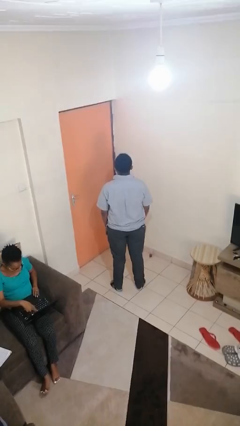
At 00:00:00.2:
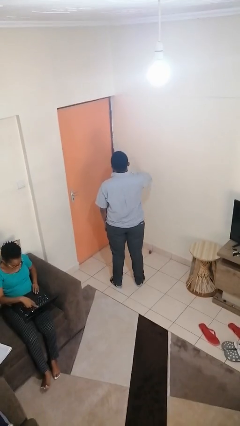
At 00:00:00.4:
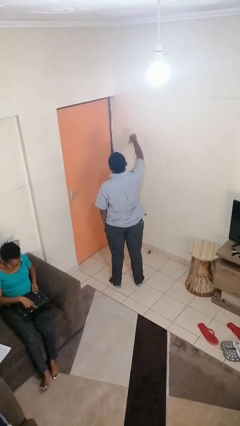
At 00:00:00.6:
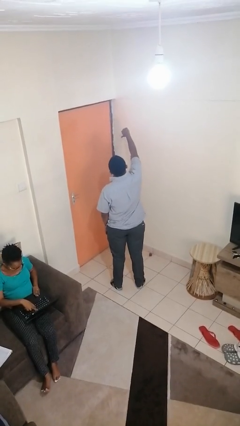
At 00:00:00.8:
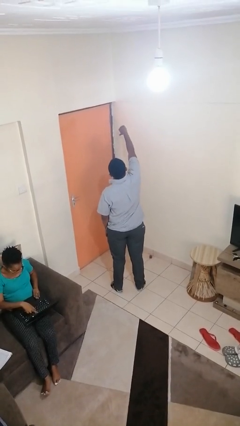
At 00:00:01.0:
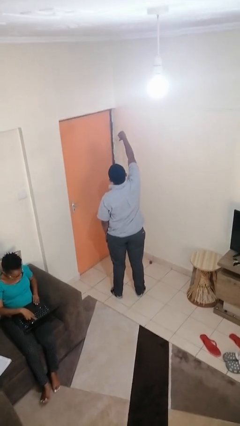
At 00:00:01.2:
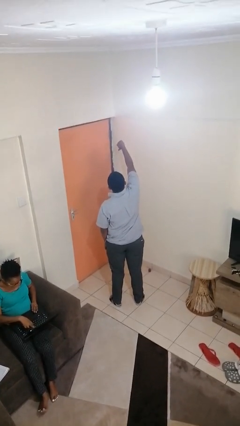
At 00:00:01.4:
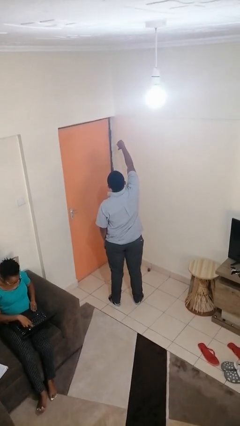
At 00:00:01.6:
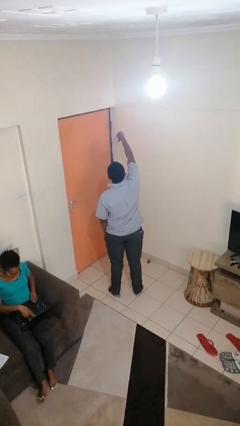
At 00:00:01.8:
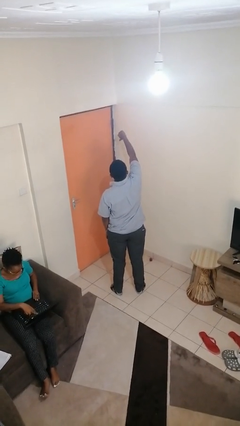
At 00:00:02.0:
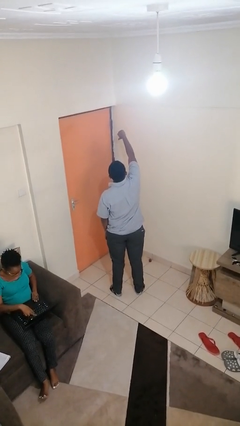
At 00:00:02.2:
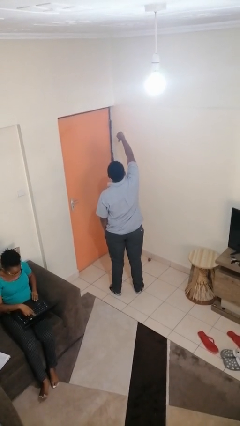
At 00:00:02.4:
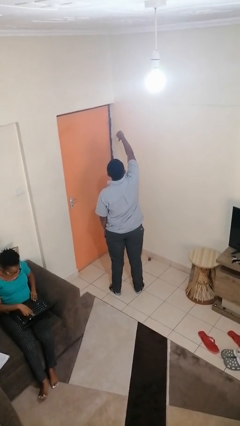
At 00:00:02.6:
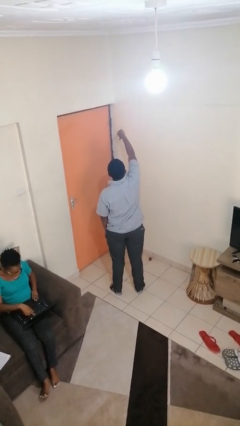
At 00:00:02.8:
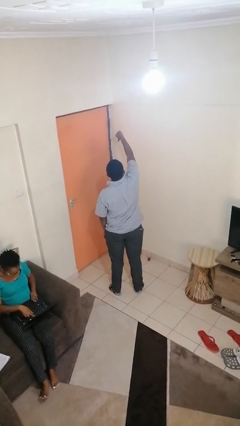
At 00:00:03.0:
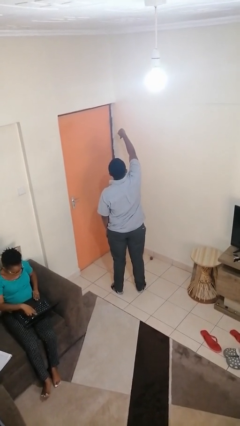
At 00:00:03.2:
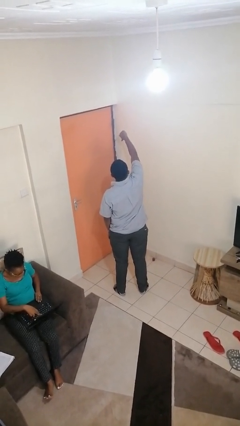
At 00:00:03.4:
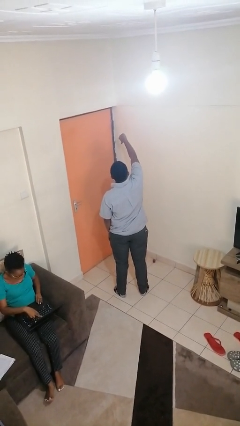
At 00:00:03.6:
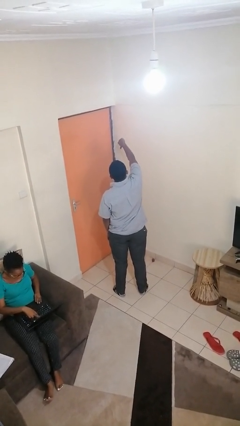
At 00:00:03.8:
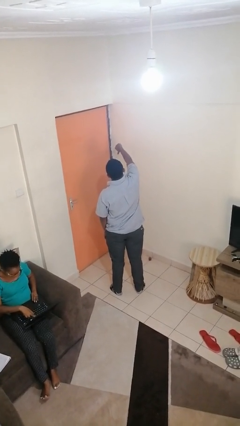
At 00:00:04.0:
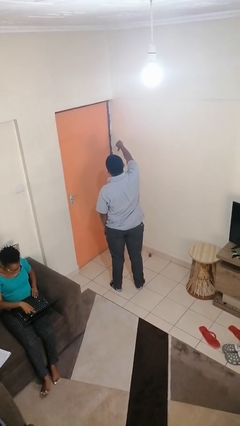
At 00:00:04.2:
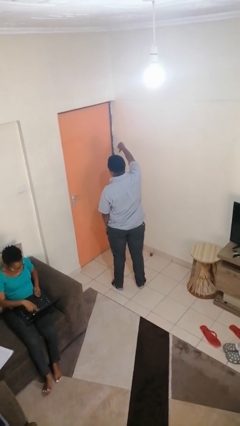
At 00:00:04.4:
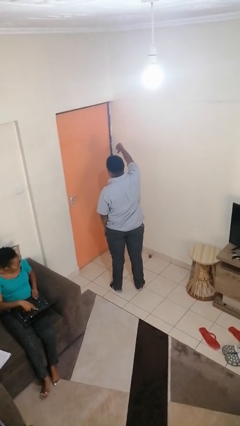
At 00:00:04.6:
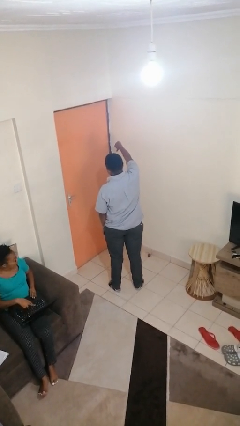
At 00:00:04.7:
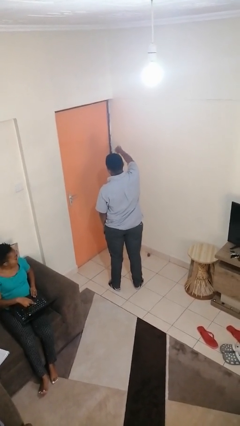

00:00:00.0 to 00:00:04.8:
person gestures thumbs down

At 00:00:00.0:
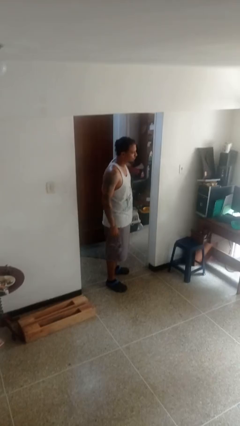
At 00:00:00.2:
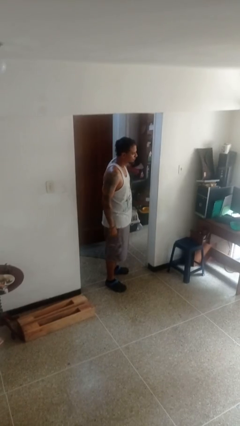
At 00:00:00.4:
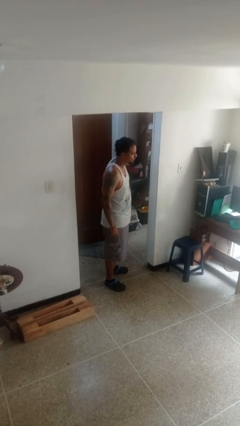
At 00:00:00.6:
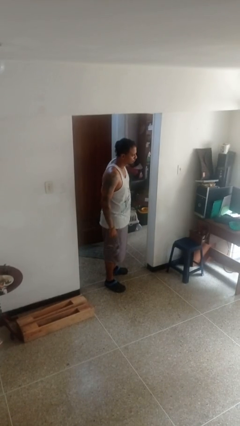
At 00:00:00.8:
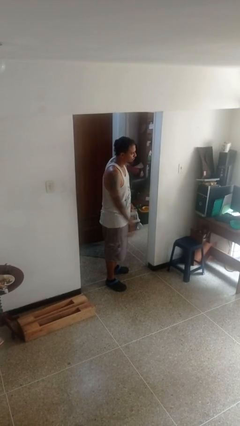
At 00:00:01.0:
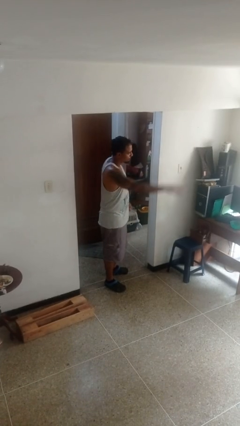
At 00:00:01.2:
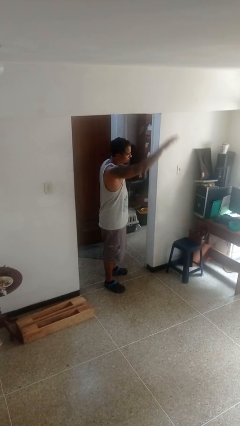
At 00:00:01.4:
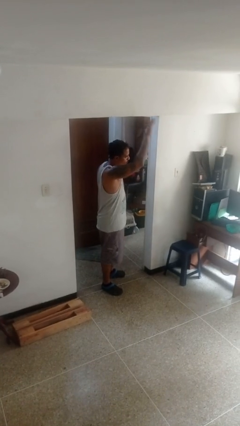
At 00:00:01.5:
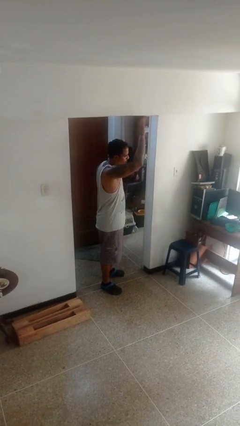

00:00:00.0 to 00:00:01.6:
person gestures swipe up

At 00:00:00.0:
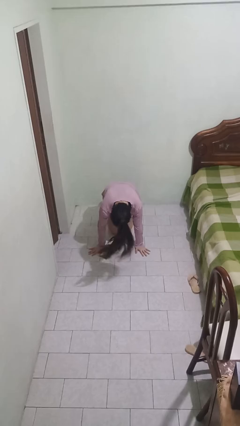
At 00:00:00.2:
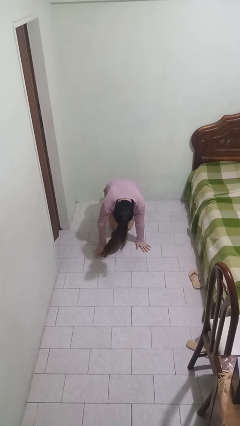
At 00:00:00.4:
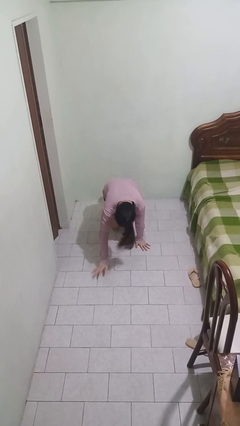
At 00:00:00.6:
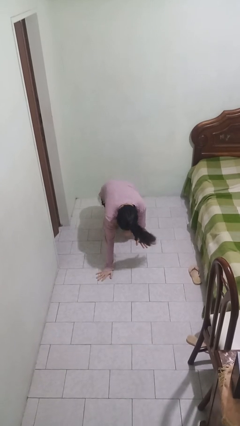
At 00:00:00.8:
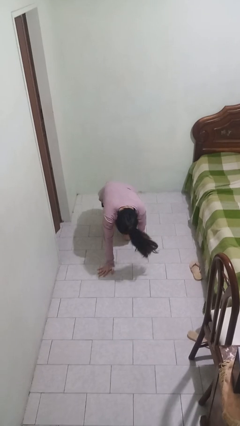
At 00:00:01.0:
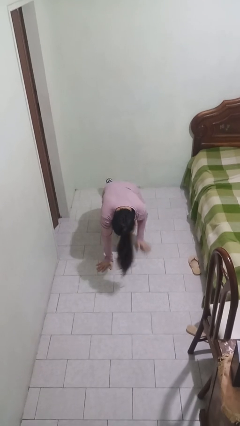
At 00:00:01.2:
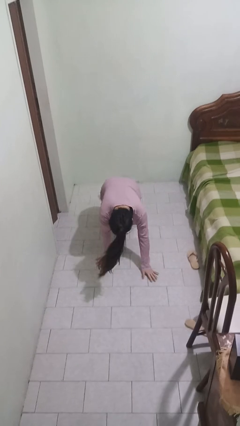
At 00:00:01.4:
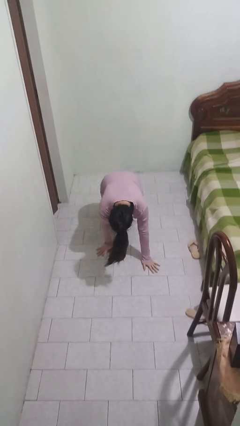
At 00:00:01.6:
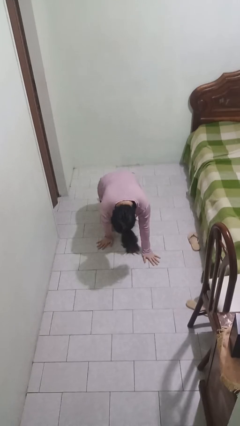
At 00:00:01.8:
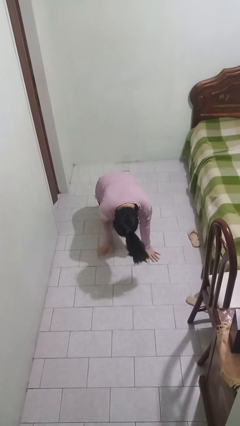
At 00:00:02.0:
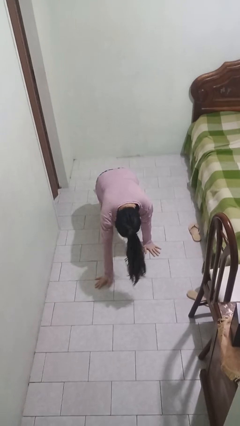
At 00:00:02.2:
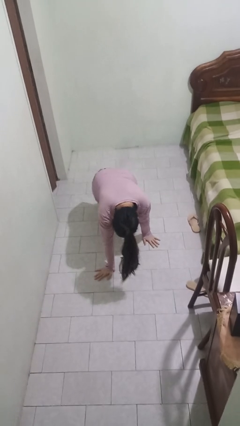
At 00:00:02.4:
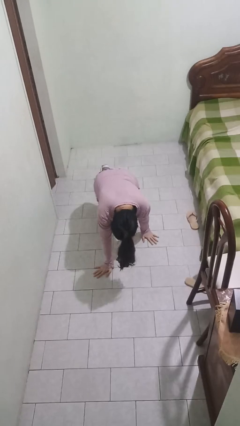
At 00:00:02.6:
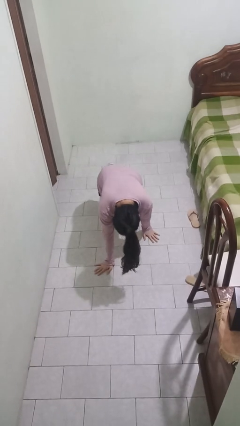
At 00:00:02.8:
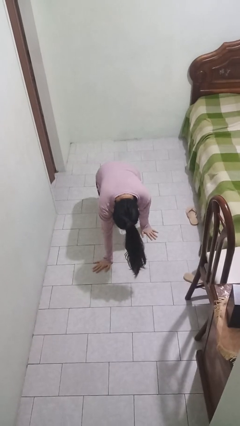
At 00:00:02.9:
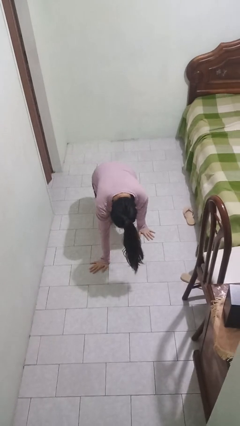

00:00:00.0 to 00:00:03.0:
person crawls

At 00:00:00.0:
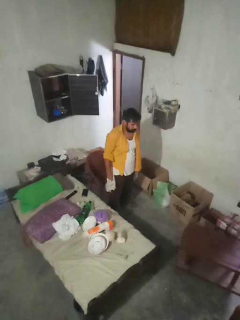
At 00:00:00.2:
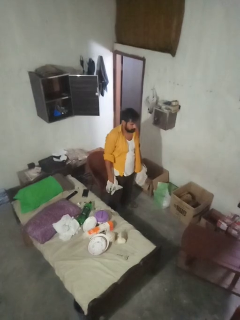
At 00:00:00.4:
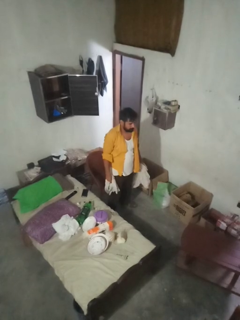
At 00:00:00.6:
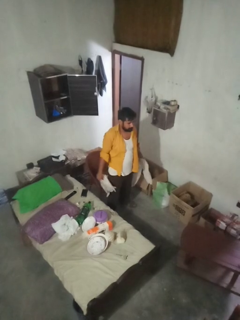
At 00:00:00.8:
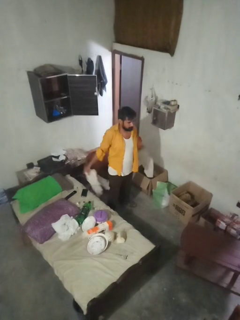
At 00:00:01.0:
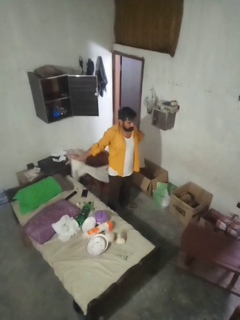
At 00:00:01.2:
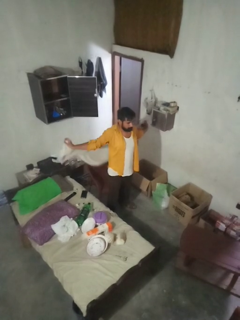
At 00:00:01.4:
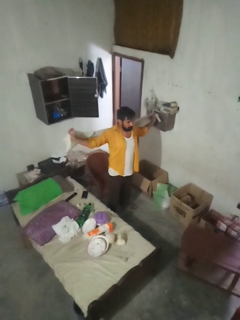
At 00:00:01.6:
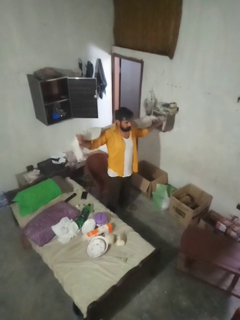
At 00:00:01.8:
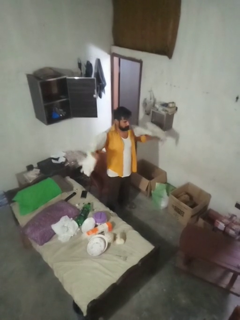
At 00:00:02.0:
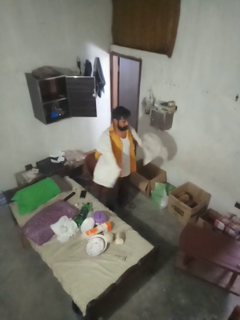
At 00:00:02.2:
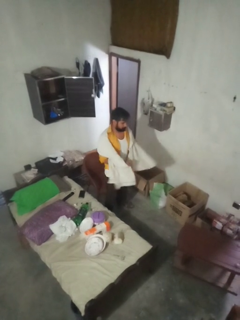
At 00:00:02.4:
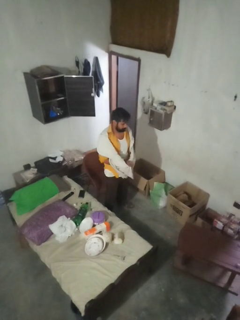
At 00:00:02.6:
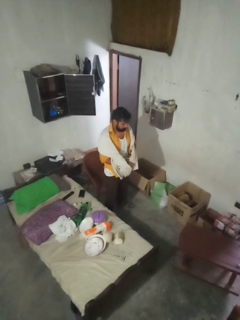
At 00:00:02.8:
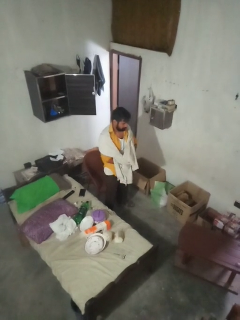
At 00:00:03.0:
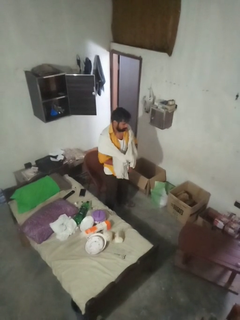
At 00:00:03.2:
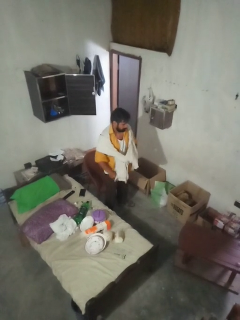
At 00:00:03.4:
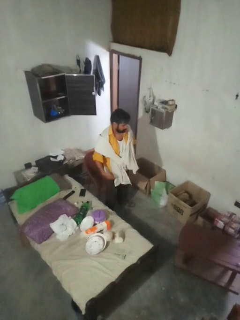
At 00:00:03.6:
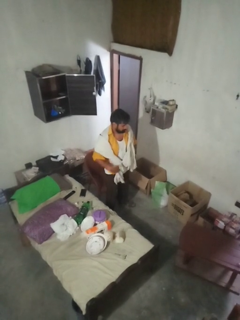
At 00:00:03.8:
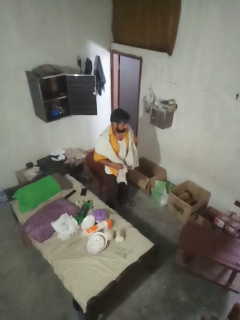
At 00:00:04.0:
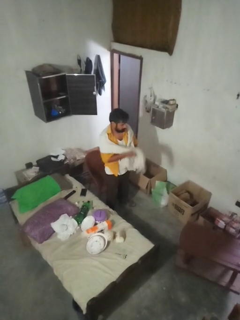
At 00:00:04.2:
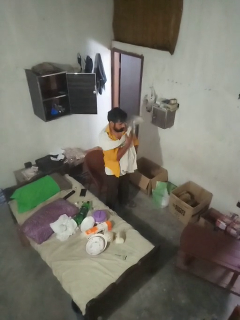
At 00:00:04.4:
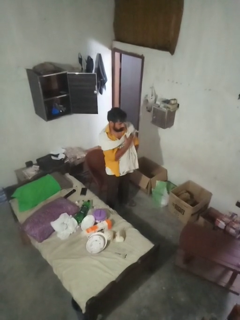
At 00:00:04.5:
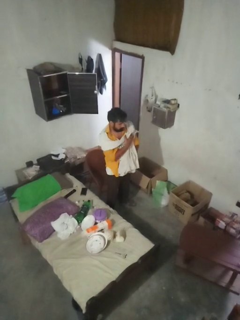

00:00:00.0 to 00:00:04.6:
person covers with blanket

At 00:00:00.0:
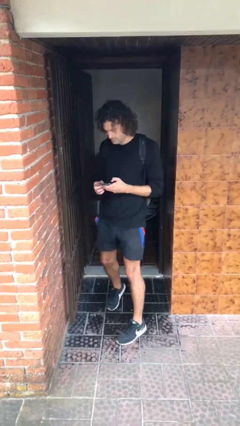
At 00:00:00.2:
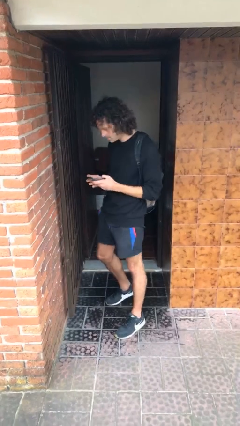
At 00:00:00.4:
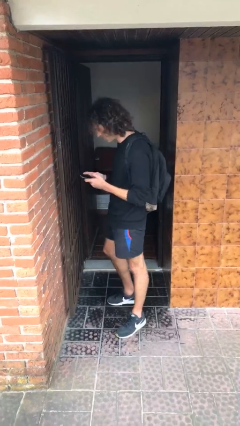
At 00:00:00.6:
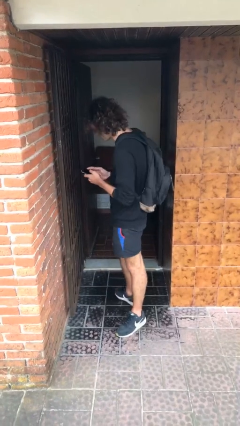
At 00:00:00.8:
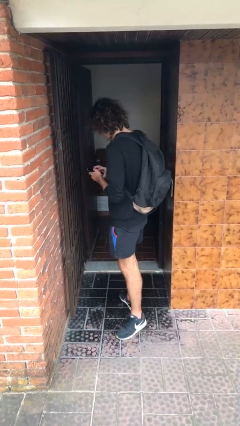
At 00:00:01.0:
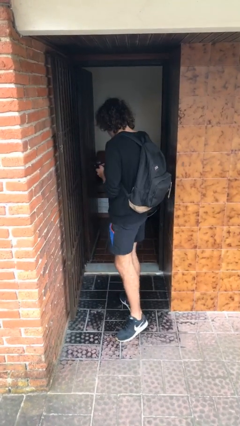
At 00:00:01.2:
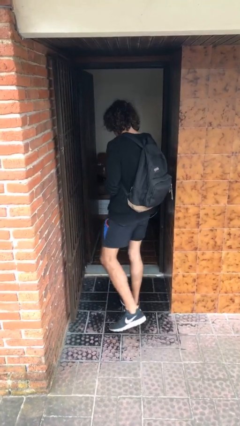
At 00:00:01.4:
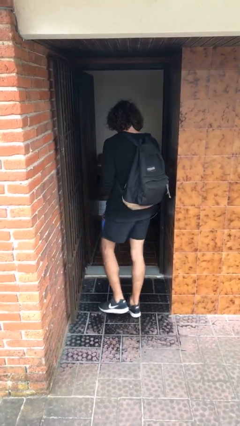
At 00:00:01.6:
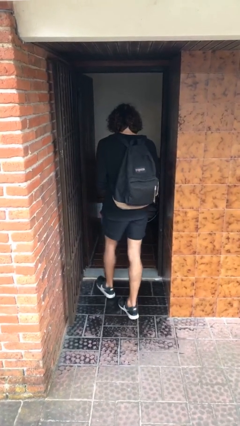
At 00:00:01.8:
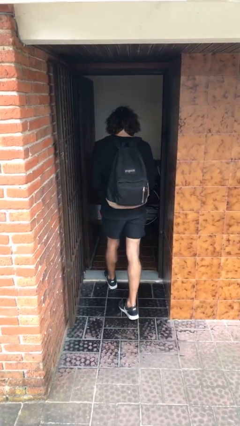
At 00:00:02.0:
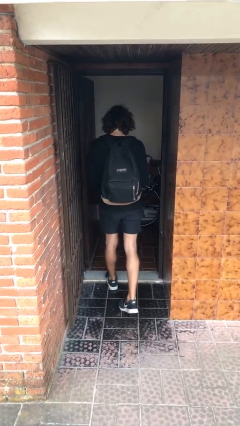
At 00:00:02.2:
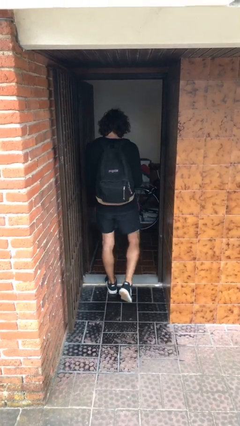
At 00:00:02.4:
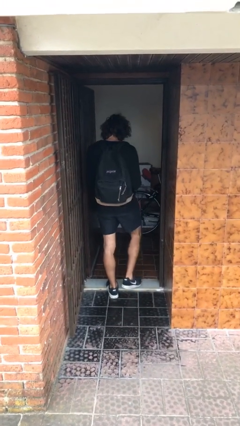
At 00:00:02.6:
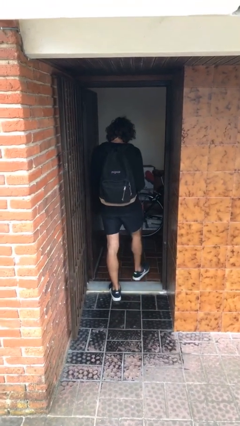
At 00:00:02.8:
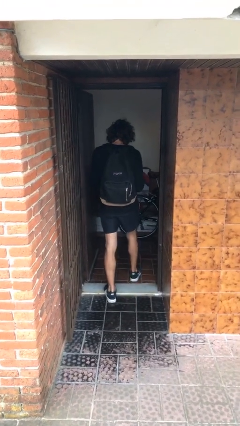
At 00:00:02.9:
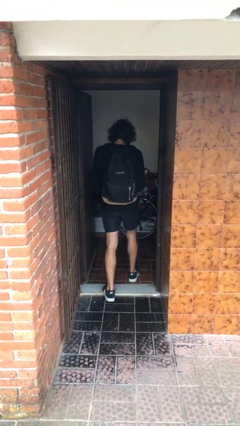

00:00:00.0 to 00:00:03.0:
person exits scene through structure

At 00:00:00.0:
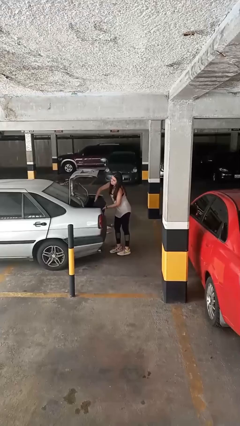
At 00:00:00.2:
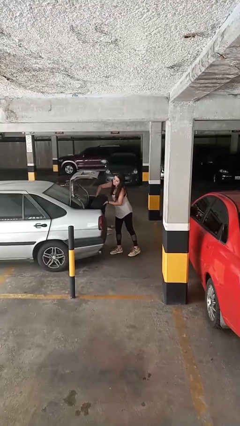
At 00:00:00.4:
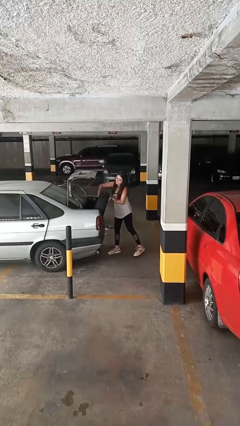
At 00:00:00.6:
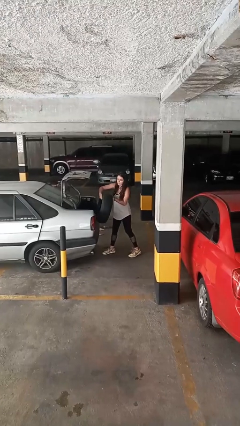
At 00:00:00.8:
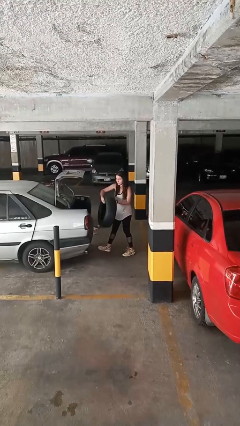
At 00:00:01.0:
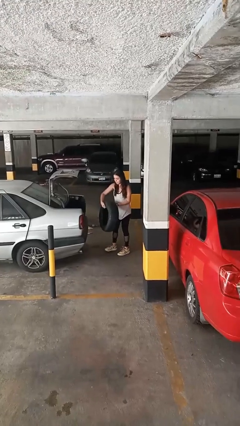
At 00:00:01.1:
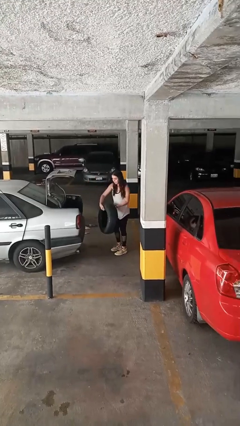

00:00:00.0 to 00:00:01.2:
person unloads car
